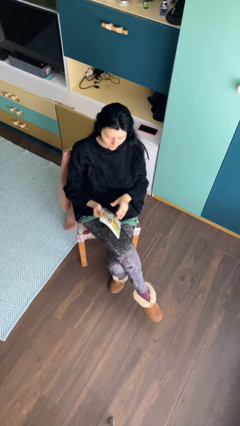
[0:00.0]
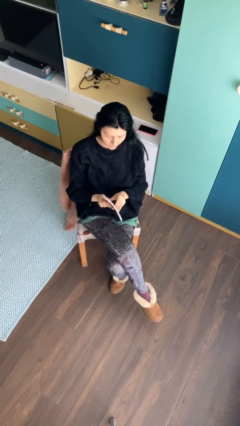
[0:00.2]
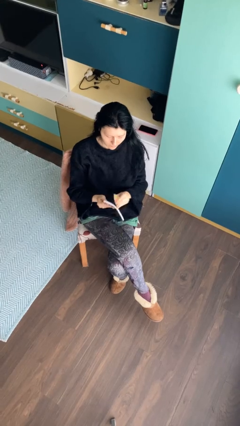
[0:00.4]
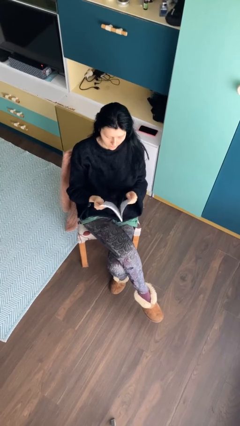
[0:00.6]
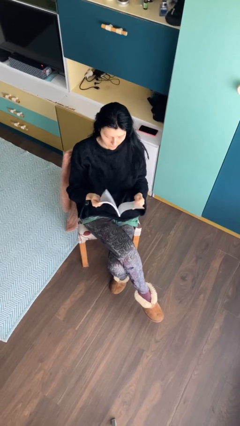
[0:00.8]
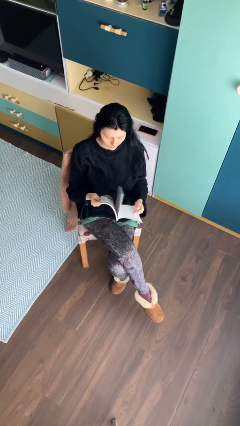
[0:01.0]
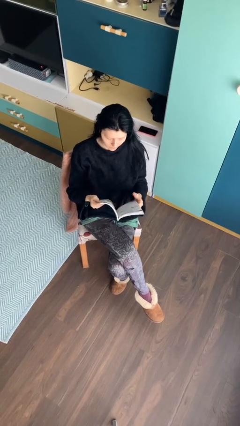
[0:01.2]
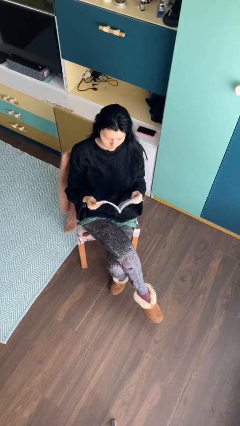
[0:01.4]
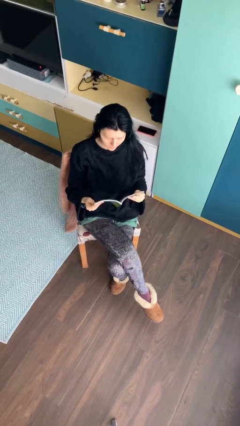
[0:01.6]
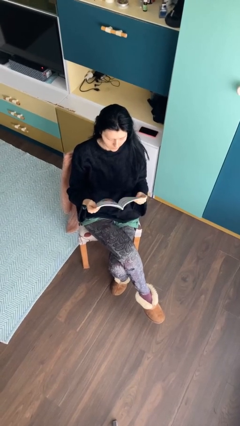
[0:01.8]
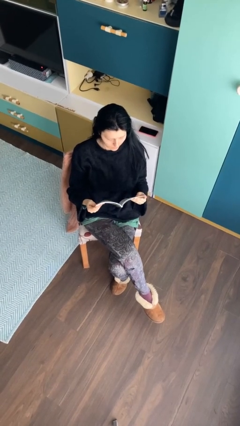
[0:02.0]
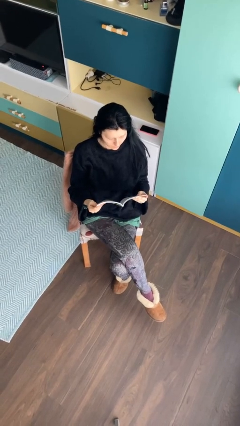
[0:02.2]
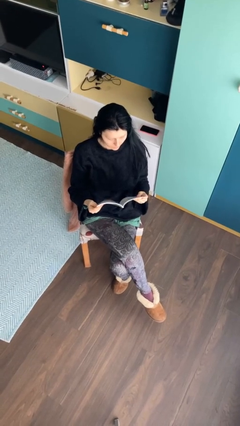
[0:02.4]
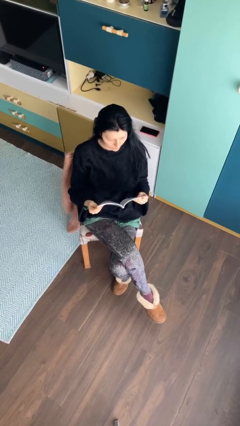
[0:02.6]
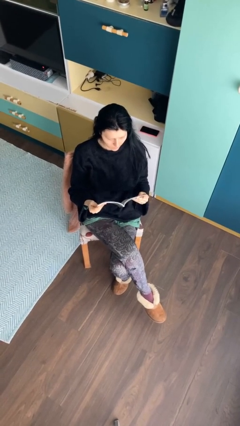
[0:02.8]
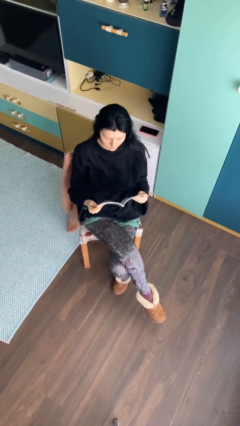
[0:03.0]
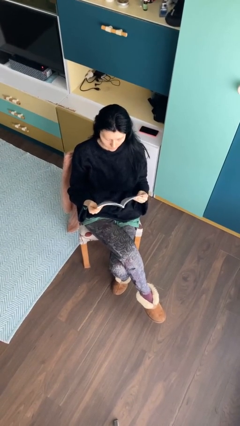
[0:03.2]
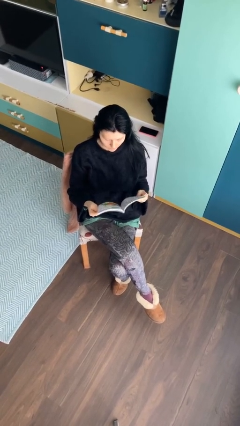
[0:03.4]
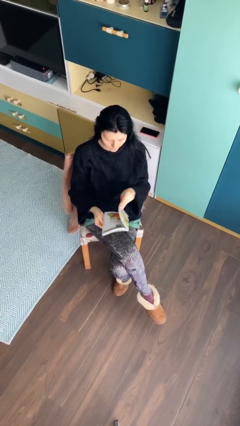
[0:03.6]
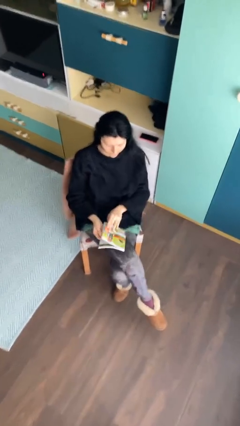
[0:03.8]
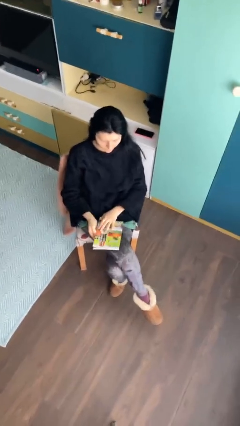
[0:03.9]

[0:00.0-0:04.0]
person reads document

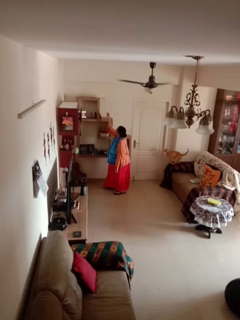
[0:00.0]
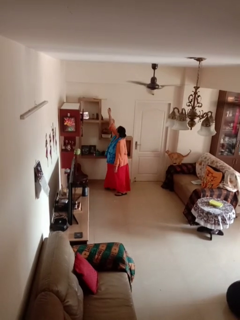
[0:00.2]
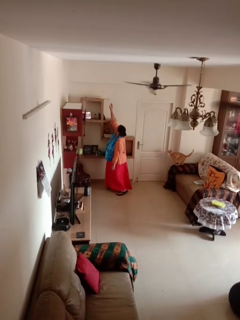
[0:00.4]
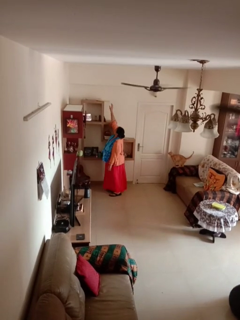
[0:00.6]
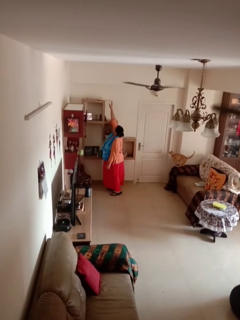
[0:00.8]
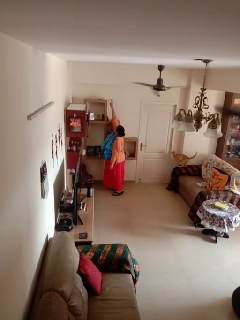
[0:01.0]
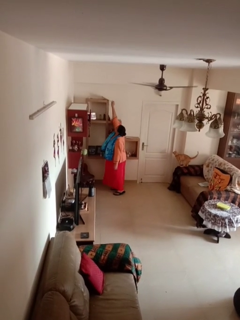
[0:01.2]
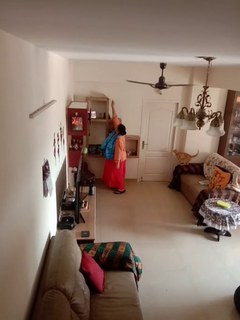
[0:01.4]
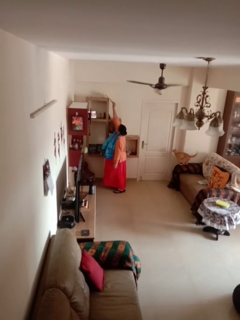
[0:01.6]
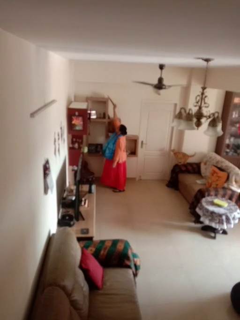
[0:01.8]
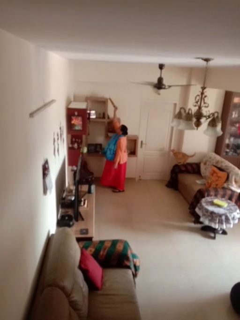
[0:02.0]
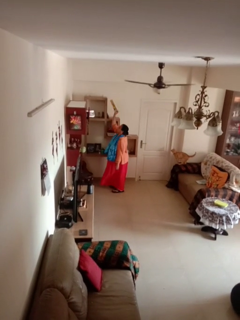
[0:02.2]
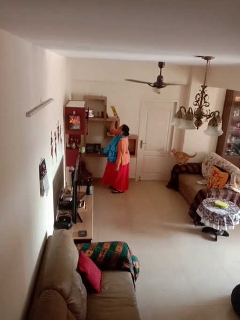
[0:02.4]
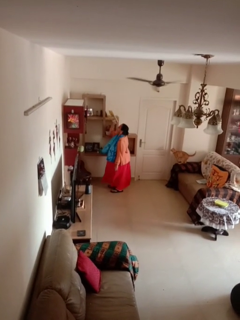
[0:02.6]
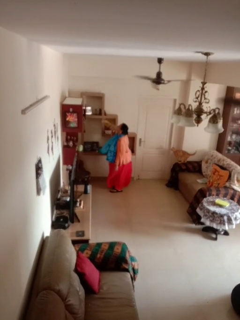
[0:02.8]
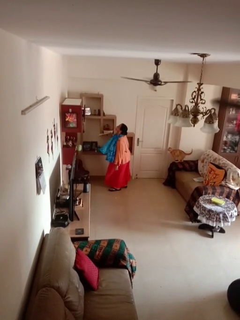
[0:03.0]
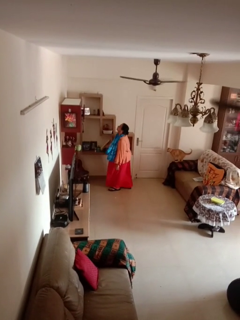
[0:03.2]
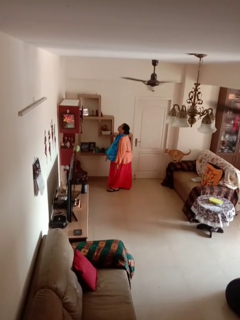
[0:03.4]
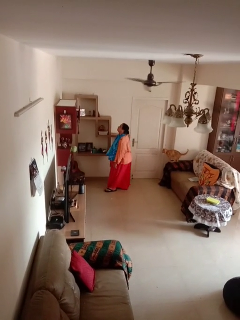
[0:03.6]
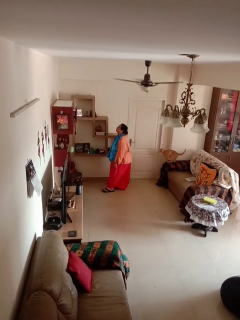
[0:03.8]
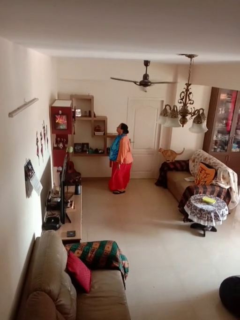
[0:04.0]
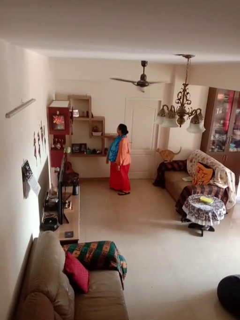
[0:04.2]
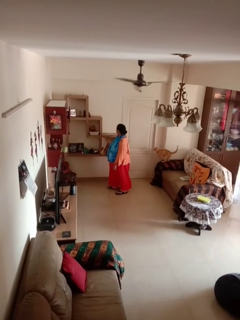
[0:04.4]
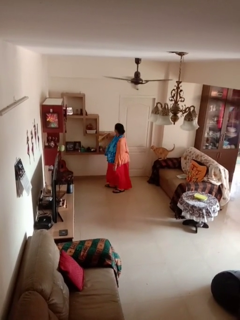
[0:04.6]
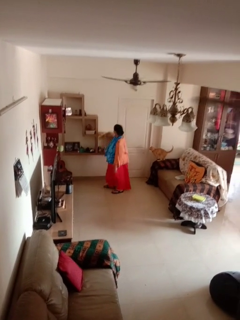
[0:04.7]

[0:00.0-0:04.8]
person picks up object from shelf

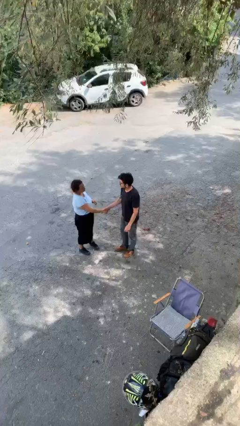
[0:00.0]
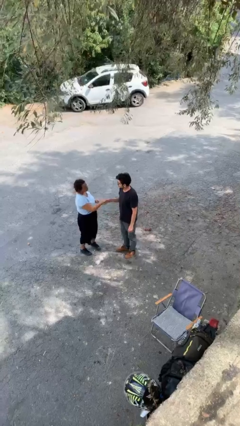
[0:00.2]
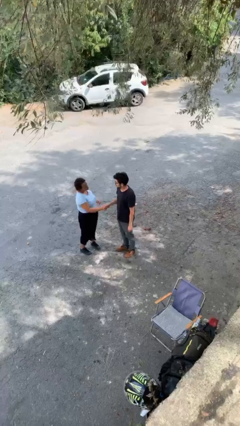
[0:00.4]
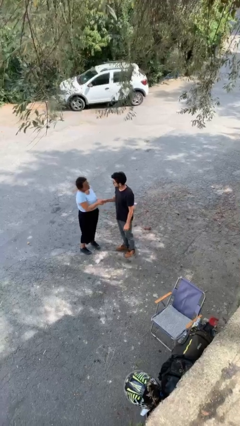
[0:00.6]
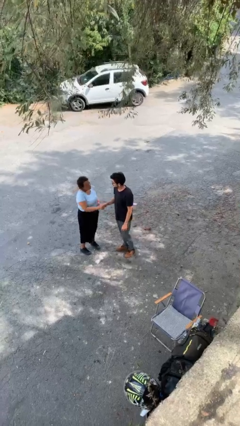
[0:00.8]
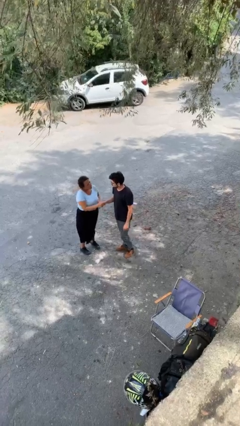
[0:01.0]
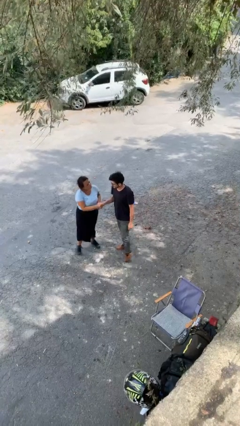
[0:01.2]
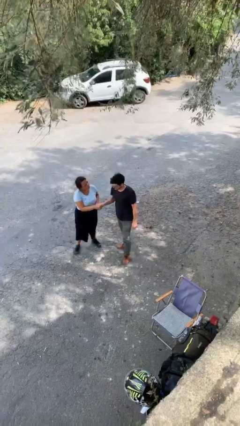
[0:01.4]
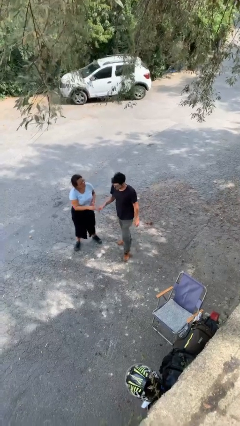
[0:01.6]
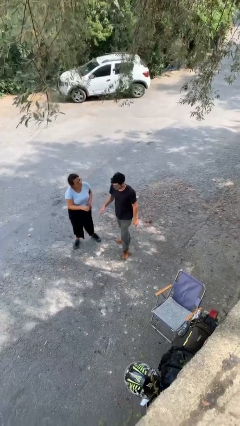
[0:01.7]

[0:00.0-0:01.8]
person shakes hand

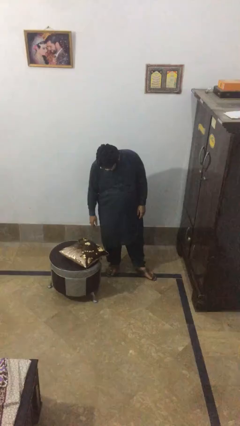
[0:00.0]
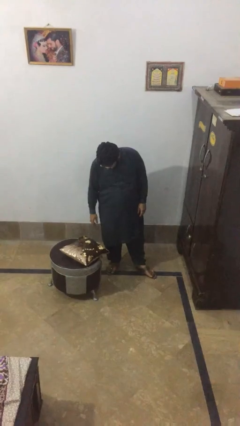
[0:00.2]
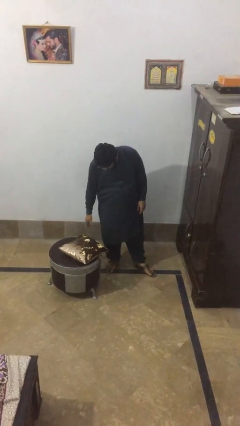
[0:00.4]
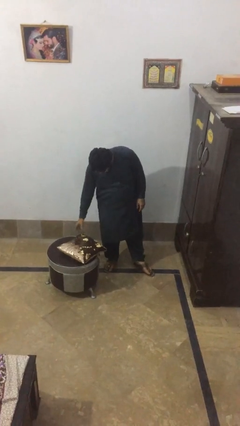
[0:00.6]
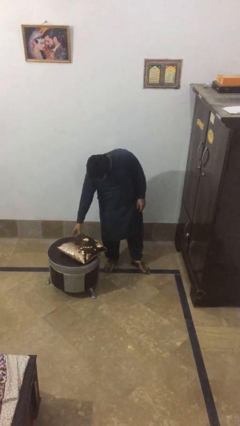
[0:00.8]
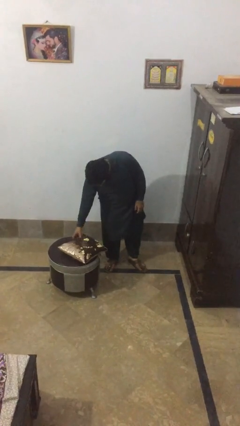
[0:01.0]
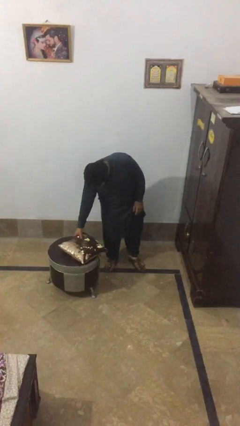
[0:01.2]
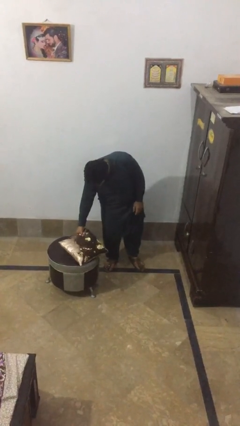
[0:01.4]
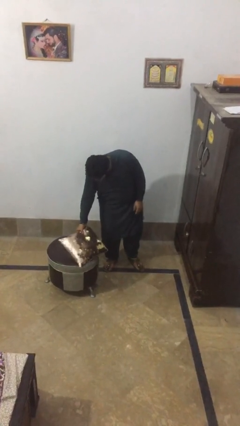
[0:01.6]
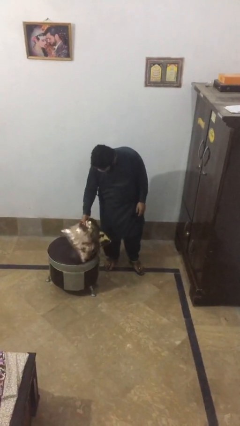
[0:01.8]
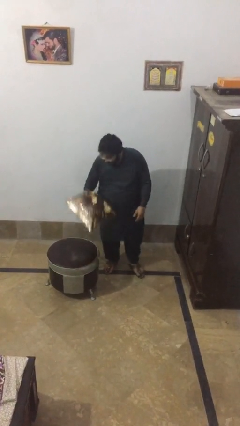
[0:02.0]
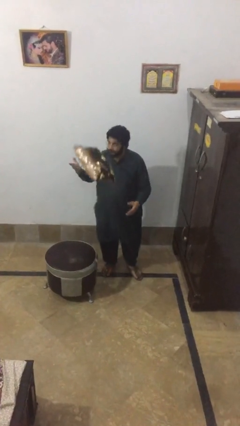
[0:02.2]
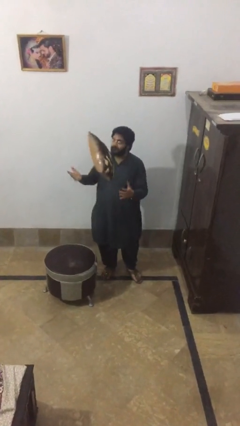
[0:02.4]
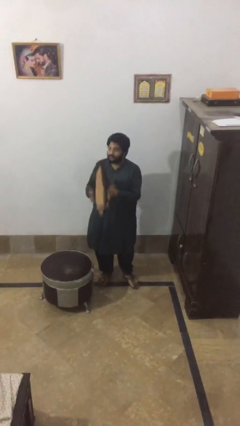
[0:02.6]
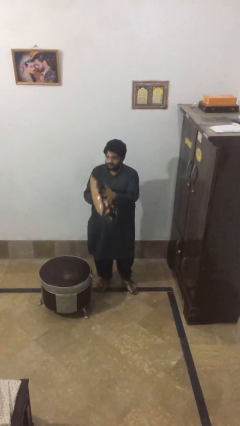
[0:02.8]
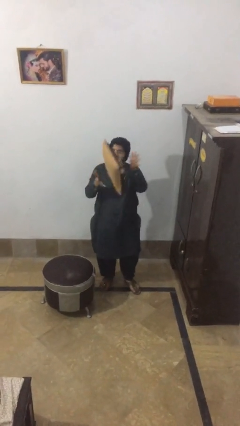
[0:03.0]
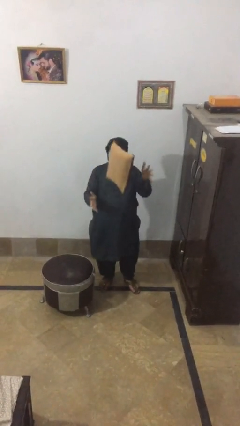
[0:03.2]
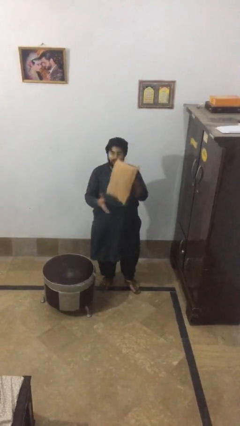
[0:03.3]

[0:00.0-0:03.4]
person picks up object from table

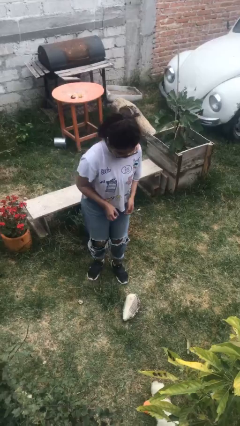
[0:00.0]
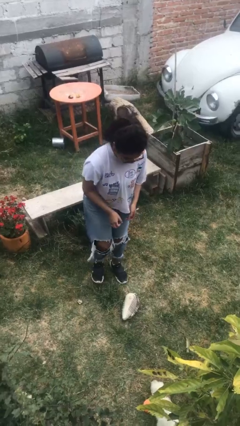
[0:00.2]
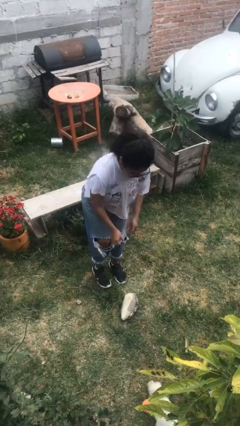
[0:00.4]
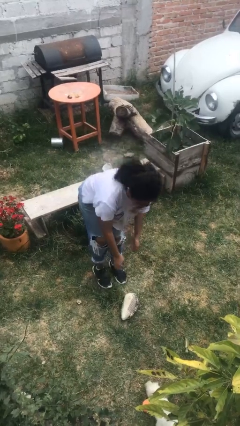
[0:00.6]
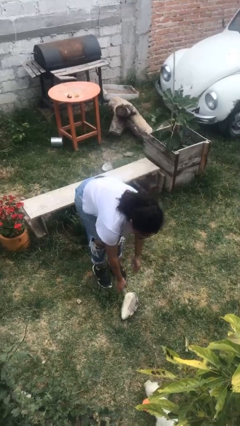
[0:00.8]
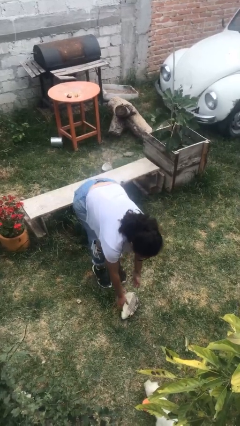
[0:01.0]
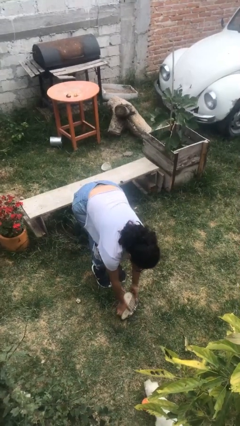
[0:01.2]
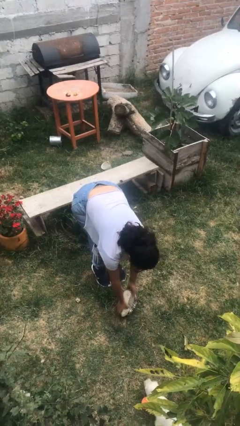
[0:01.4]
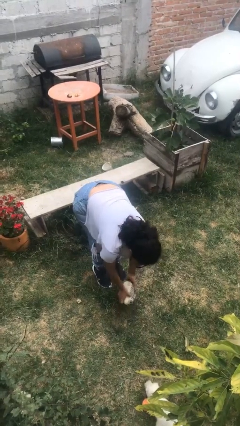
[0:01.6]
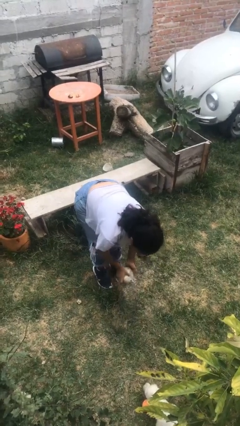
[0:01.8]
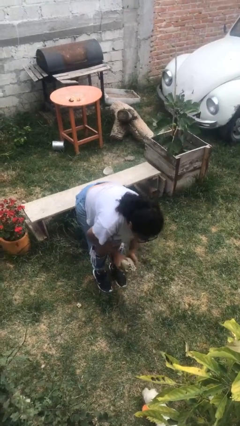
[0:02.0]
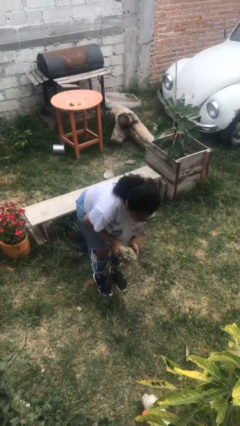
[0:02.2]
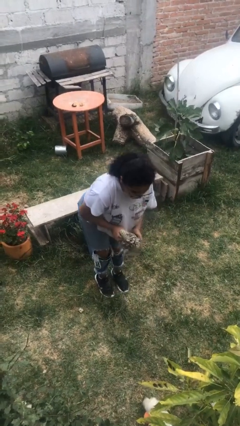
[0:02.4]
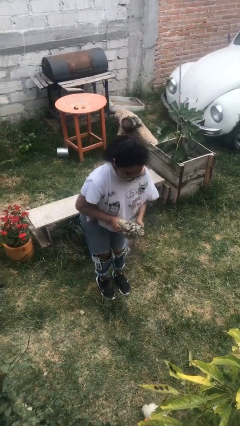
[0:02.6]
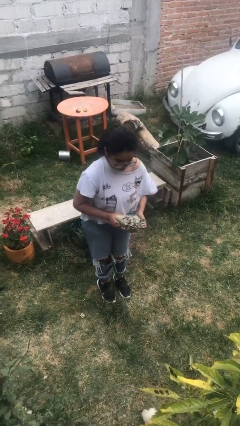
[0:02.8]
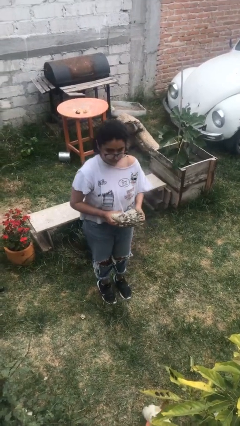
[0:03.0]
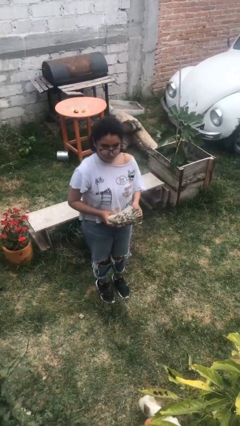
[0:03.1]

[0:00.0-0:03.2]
person picks up object from floor

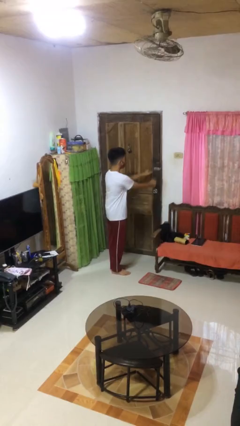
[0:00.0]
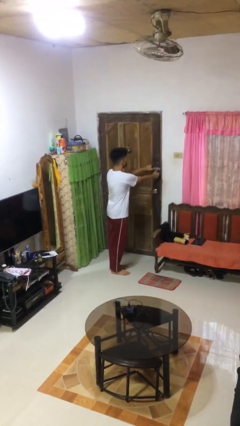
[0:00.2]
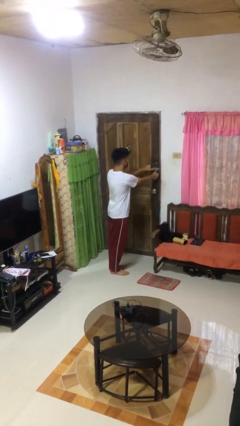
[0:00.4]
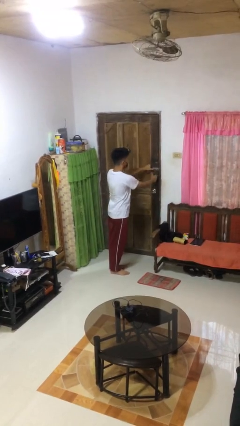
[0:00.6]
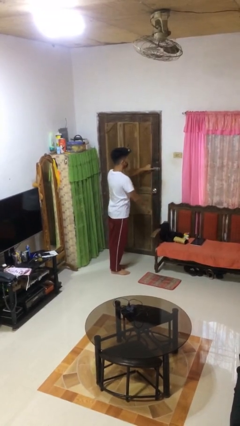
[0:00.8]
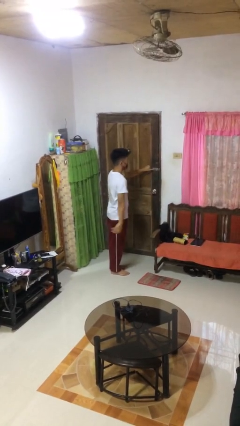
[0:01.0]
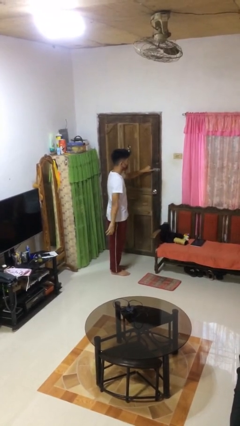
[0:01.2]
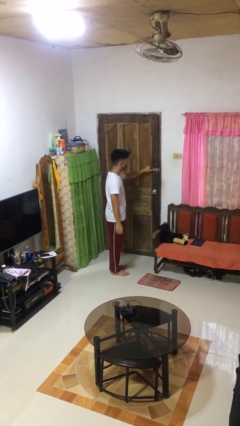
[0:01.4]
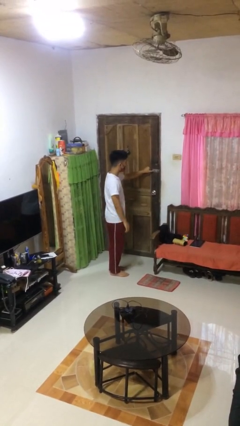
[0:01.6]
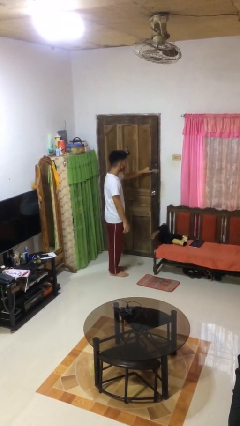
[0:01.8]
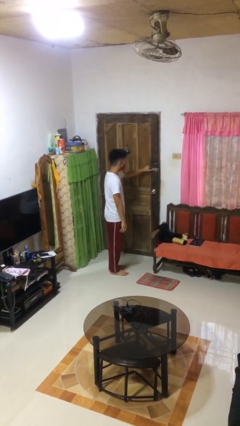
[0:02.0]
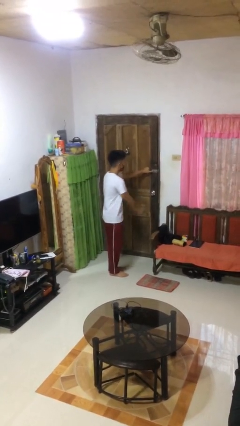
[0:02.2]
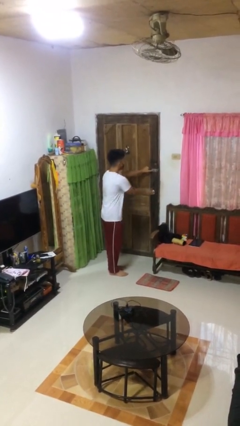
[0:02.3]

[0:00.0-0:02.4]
person unlocks door with keys
